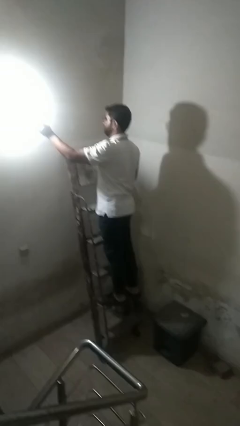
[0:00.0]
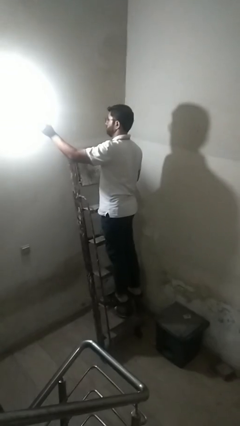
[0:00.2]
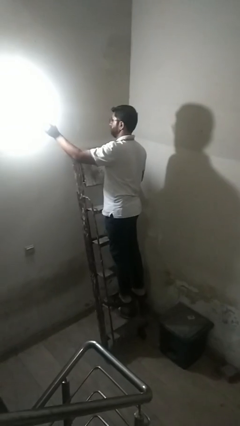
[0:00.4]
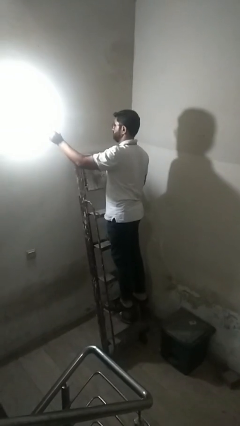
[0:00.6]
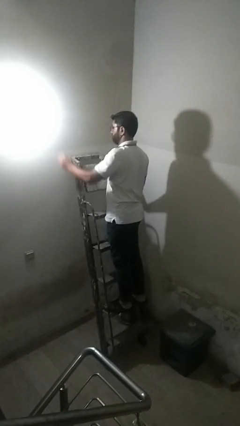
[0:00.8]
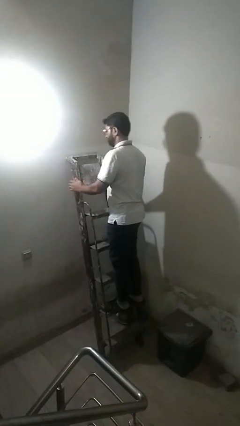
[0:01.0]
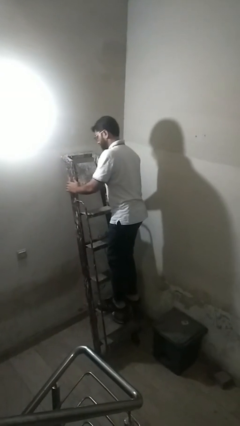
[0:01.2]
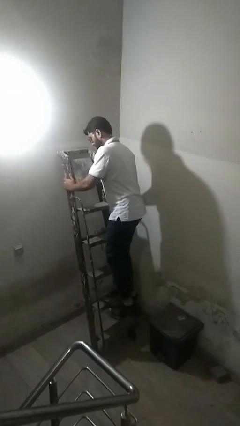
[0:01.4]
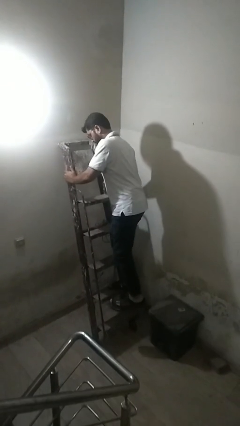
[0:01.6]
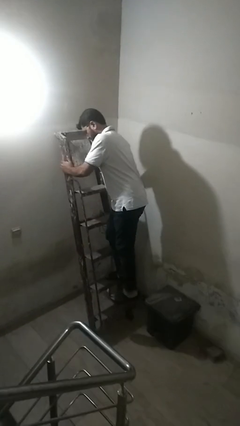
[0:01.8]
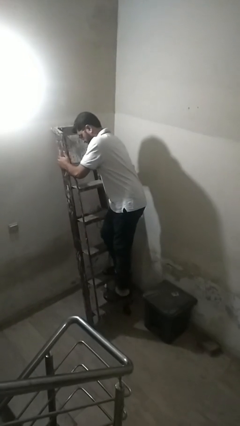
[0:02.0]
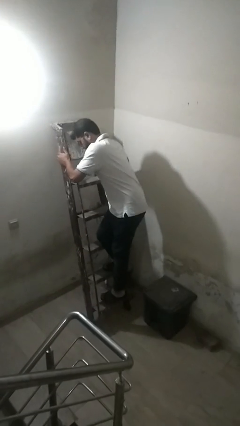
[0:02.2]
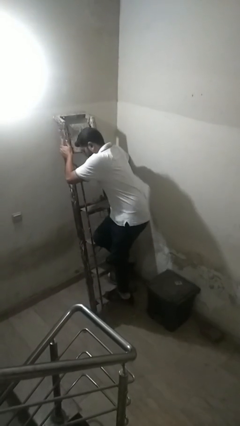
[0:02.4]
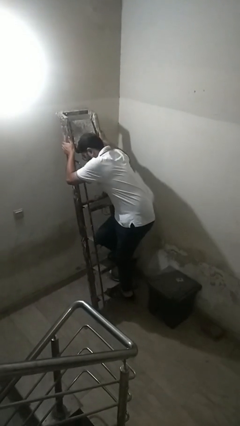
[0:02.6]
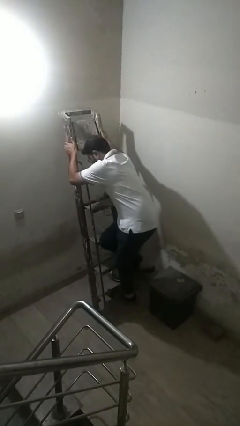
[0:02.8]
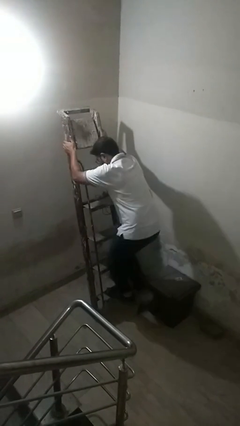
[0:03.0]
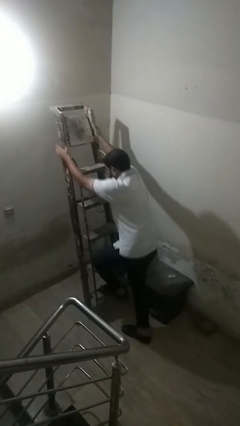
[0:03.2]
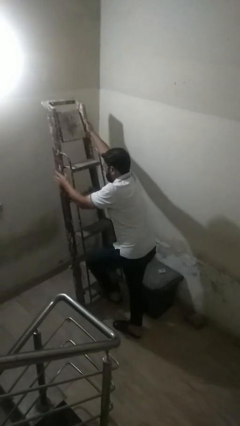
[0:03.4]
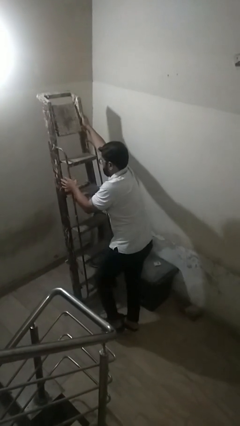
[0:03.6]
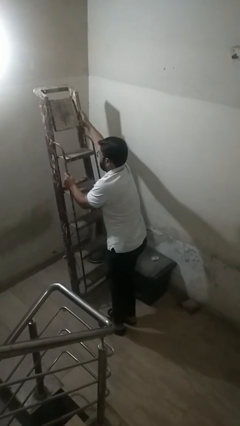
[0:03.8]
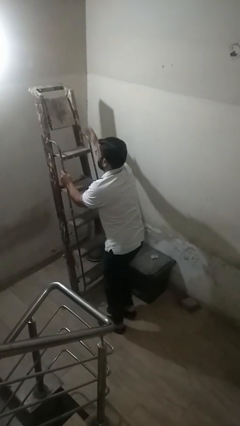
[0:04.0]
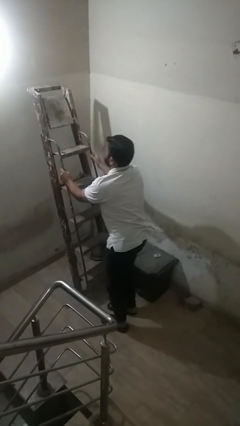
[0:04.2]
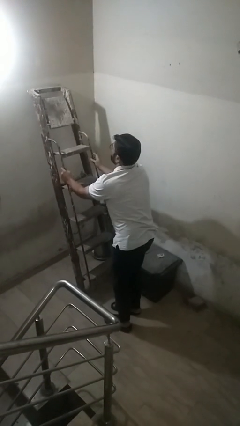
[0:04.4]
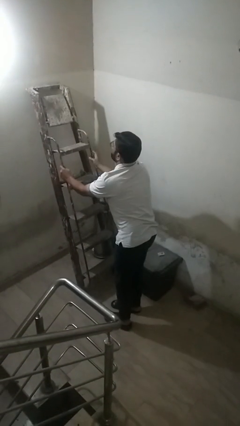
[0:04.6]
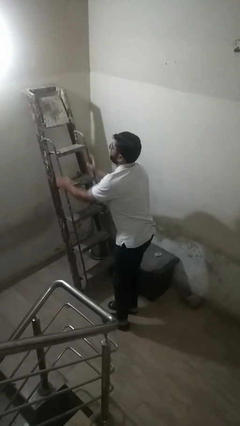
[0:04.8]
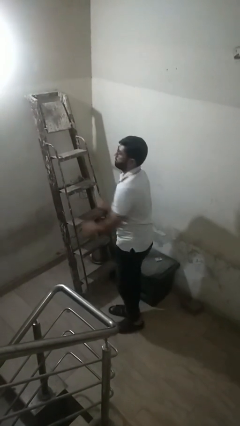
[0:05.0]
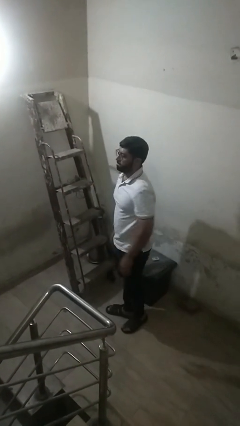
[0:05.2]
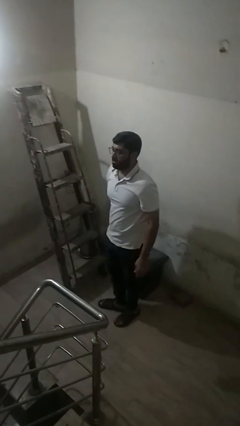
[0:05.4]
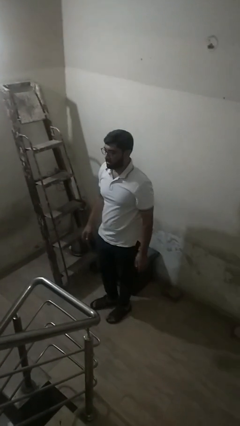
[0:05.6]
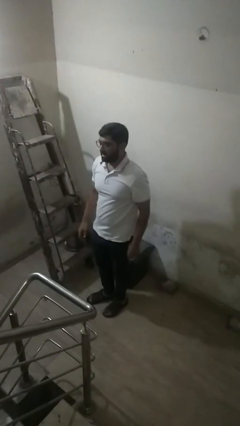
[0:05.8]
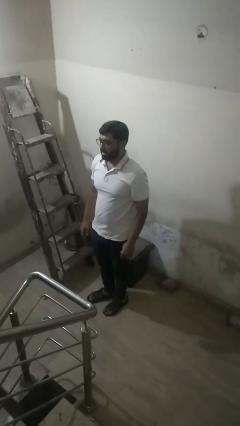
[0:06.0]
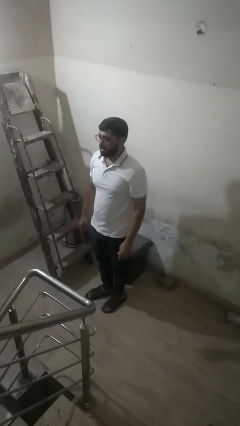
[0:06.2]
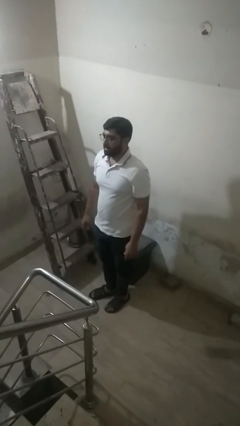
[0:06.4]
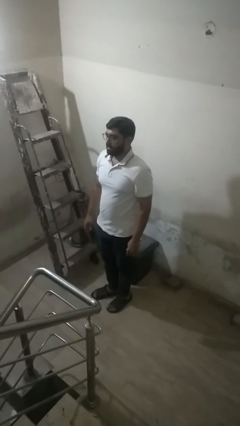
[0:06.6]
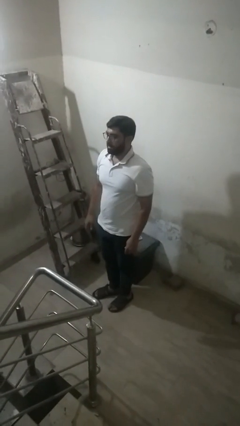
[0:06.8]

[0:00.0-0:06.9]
person climbs down ladder

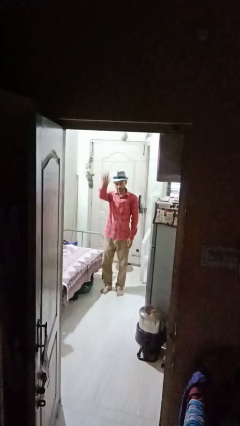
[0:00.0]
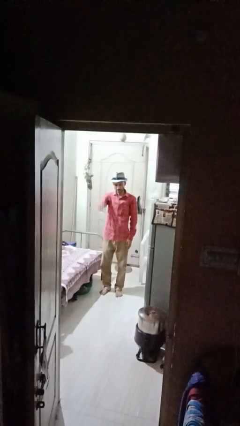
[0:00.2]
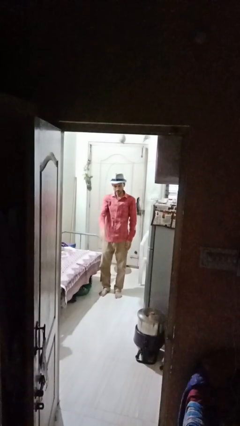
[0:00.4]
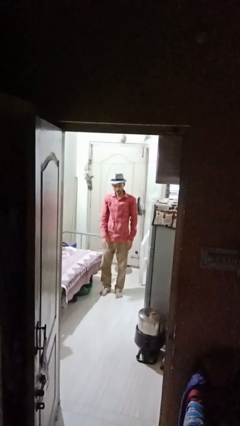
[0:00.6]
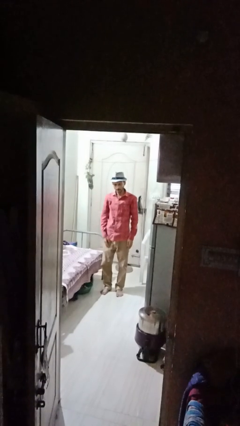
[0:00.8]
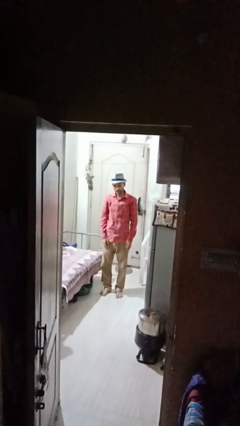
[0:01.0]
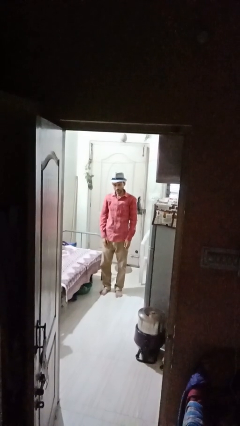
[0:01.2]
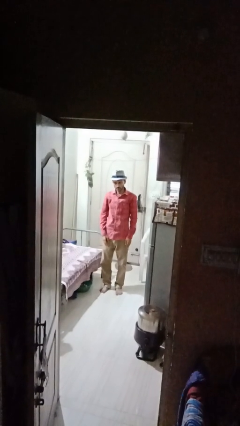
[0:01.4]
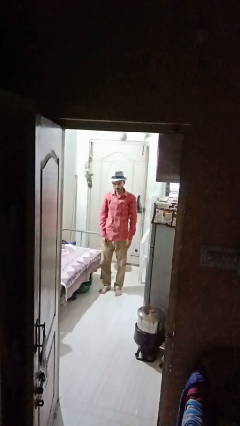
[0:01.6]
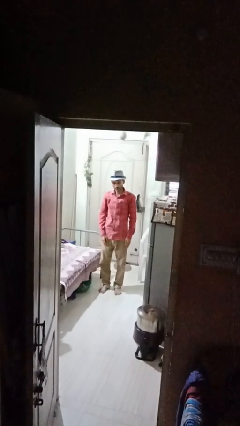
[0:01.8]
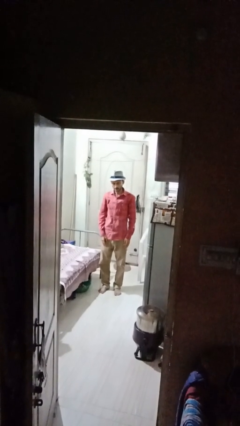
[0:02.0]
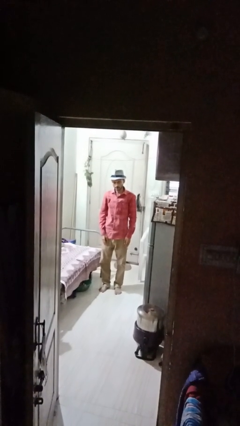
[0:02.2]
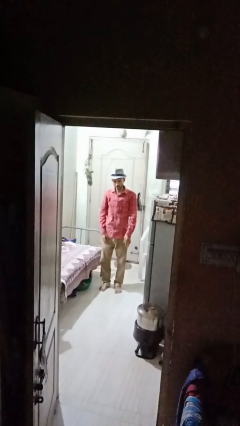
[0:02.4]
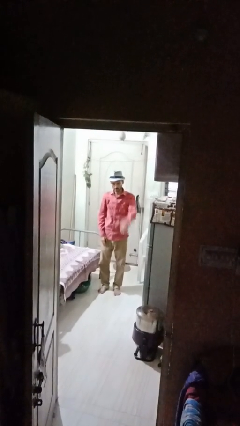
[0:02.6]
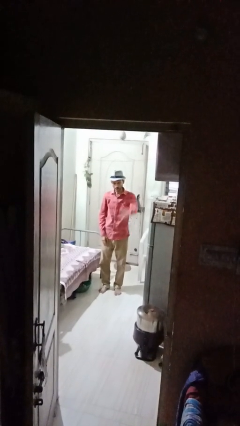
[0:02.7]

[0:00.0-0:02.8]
person gestures lower hand

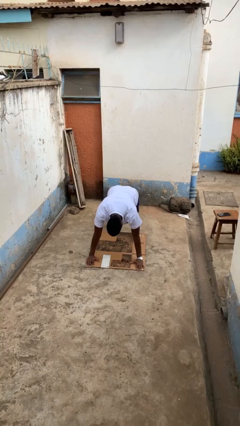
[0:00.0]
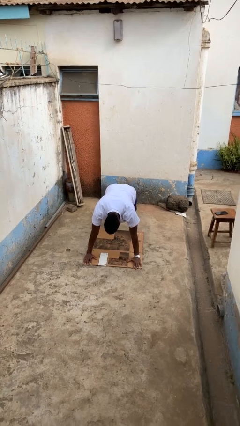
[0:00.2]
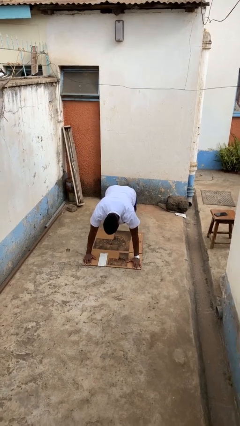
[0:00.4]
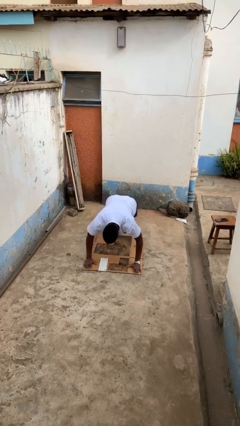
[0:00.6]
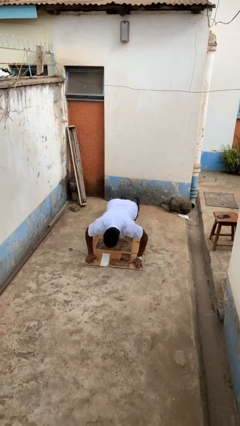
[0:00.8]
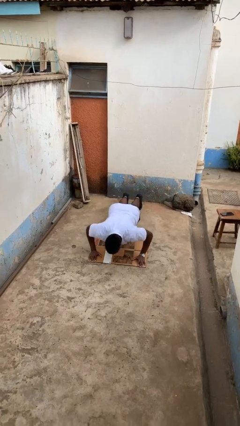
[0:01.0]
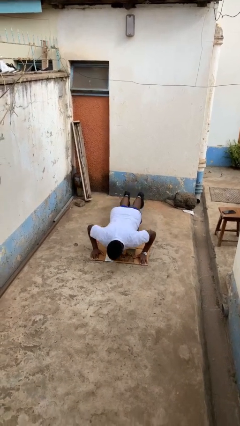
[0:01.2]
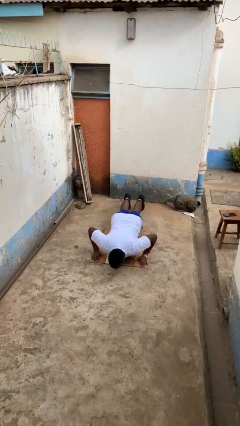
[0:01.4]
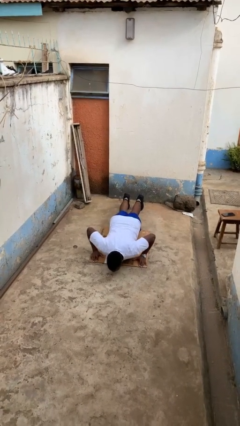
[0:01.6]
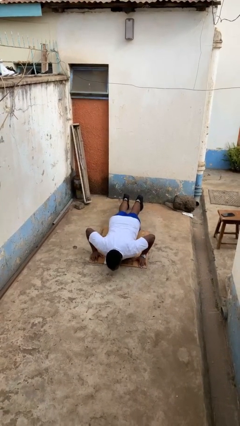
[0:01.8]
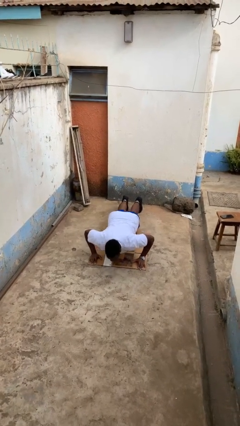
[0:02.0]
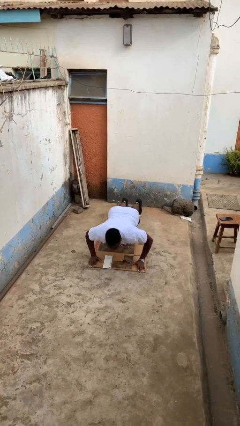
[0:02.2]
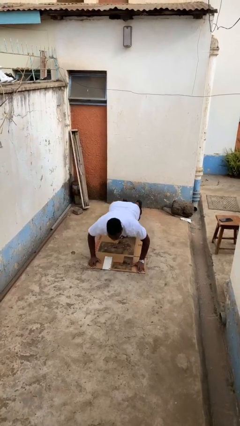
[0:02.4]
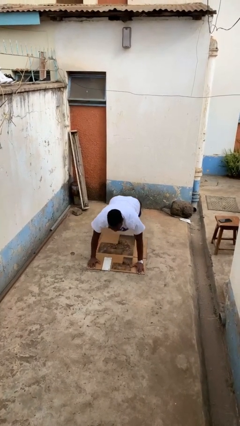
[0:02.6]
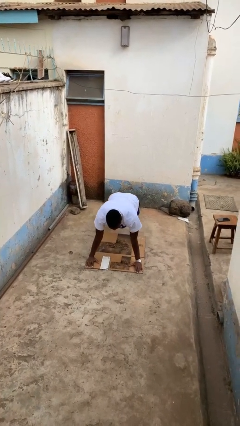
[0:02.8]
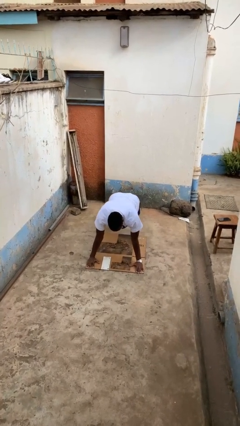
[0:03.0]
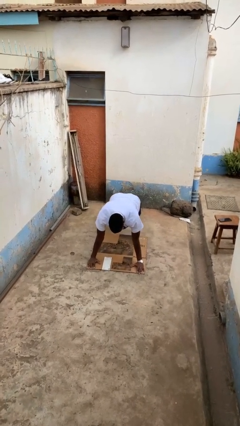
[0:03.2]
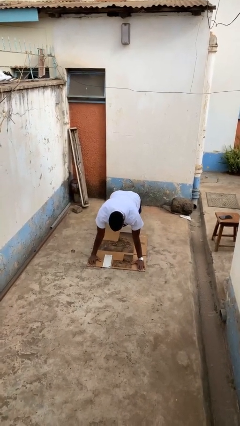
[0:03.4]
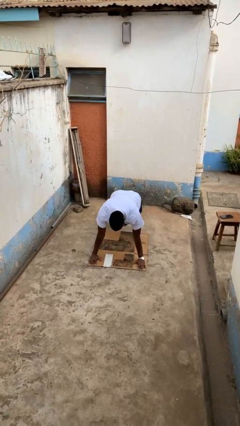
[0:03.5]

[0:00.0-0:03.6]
person exercises with pushup

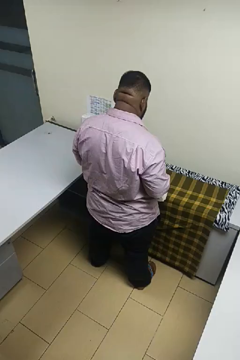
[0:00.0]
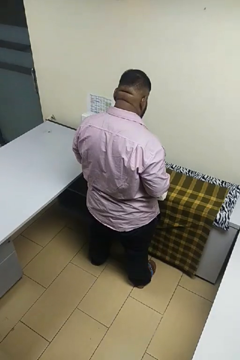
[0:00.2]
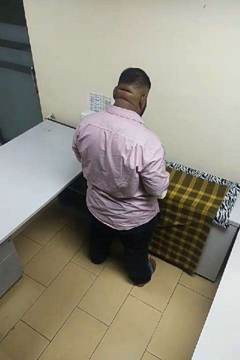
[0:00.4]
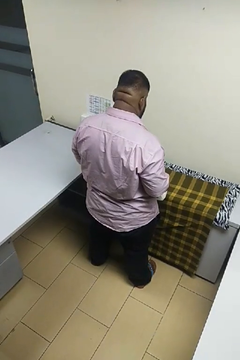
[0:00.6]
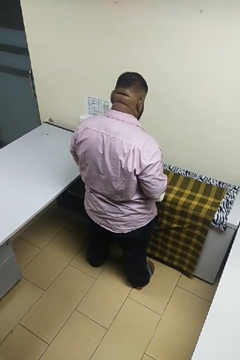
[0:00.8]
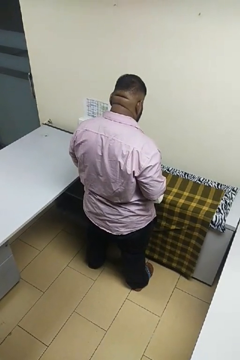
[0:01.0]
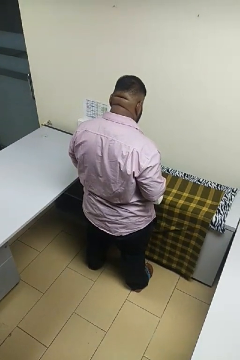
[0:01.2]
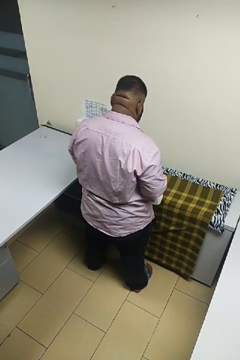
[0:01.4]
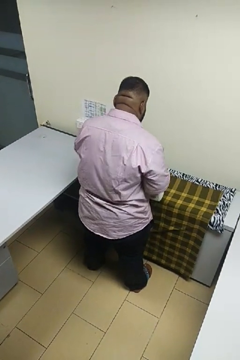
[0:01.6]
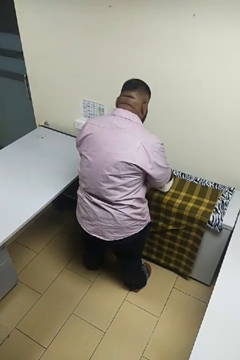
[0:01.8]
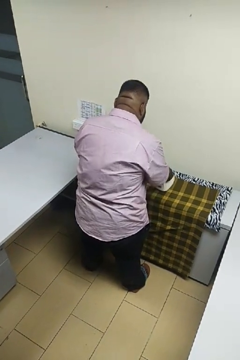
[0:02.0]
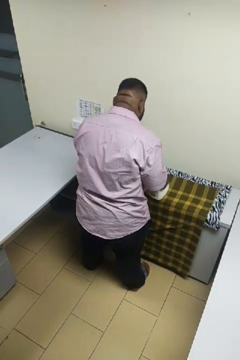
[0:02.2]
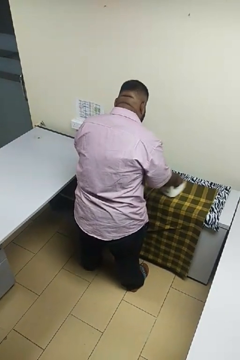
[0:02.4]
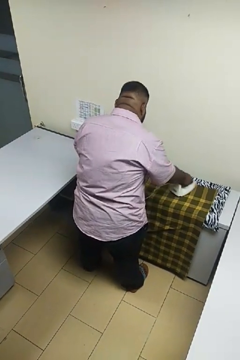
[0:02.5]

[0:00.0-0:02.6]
person irons clothes

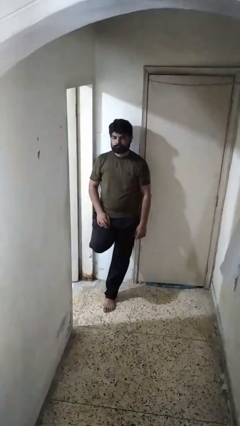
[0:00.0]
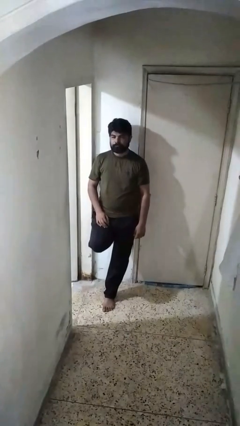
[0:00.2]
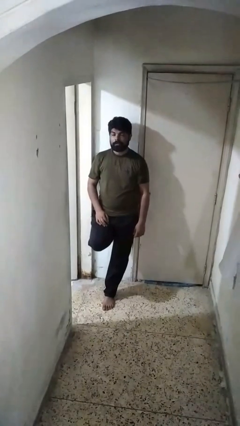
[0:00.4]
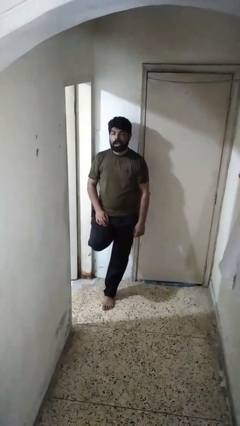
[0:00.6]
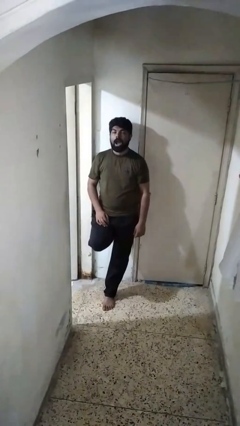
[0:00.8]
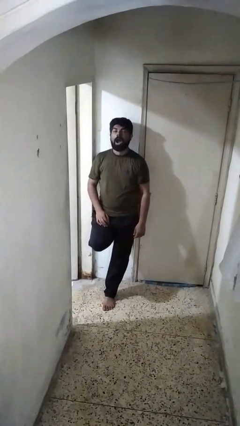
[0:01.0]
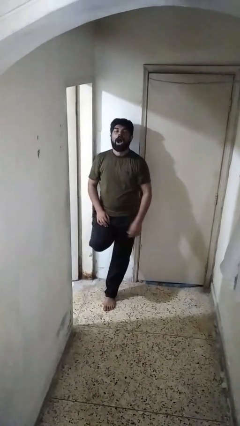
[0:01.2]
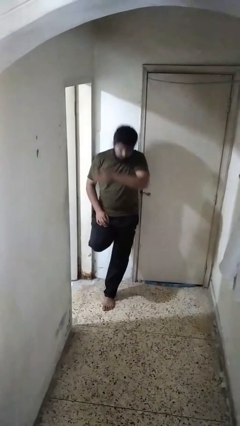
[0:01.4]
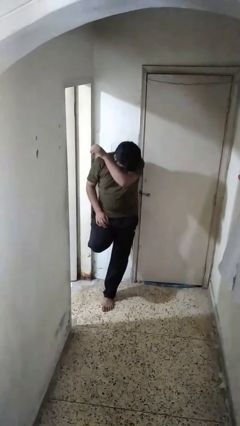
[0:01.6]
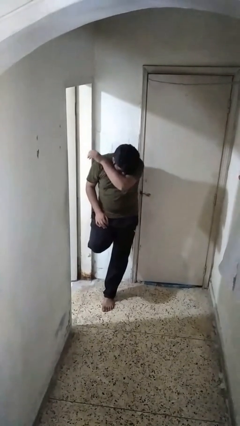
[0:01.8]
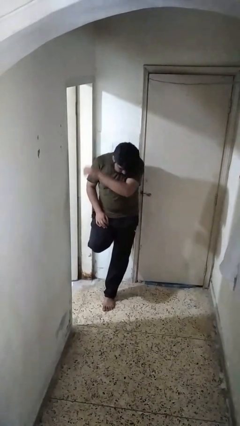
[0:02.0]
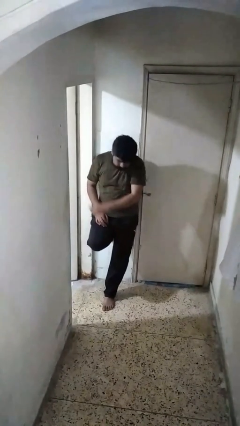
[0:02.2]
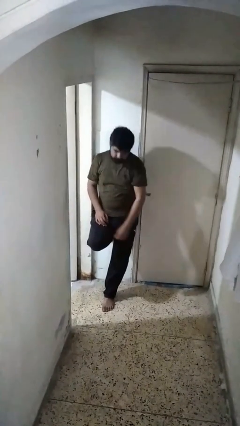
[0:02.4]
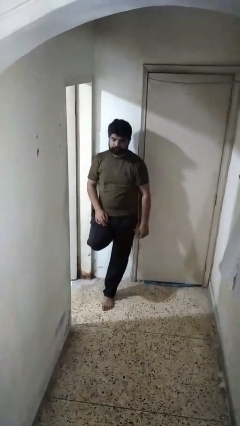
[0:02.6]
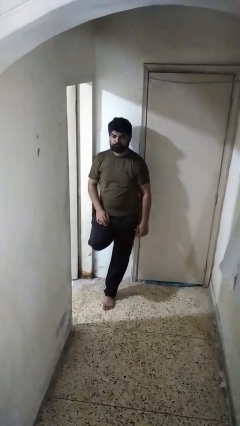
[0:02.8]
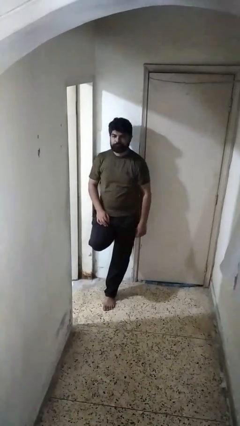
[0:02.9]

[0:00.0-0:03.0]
person sneezes into arm
